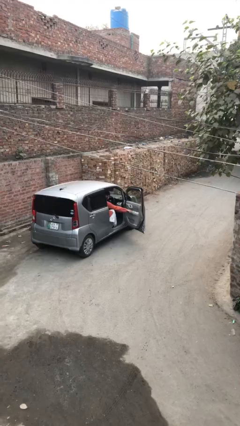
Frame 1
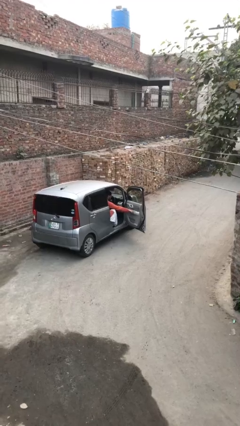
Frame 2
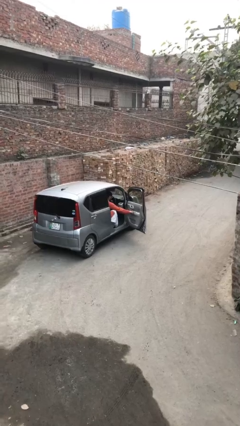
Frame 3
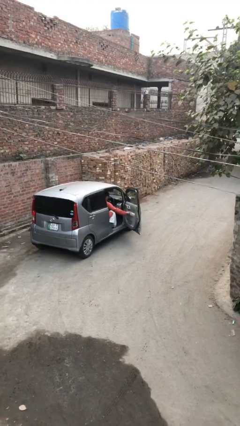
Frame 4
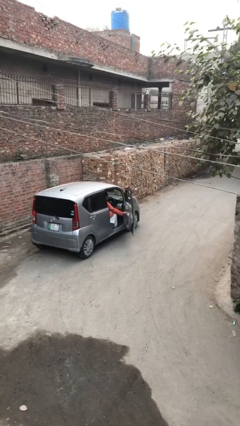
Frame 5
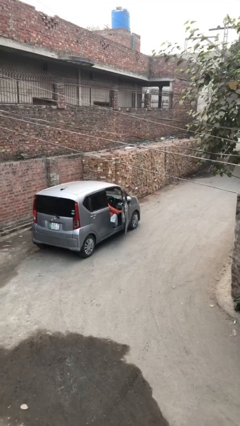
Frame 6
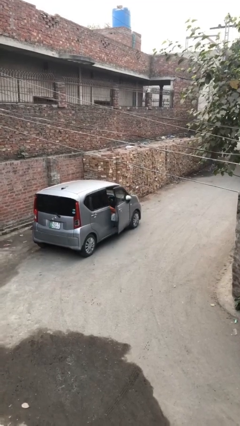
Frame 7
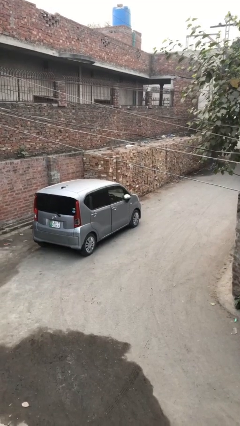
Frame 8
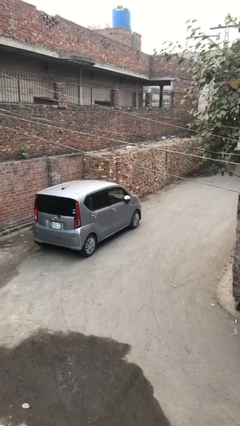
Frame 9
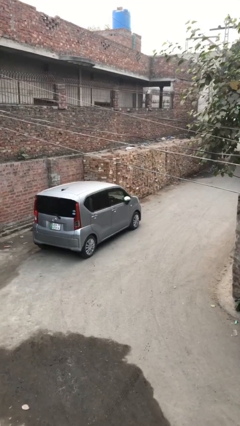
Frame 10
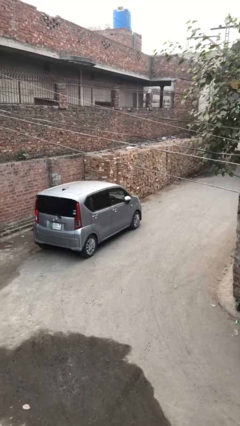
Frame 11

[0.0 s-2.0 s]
person closes car door

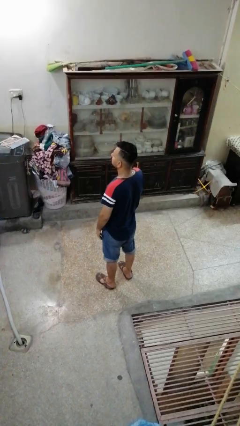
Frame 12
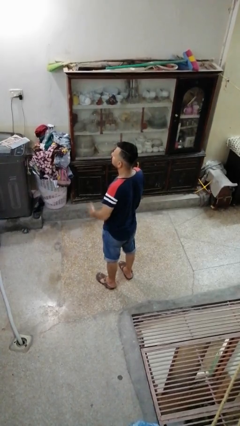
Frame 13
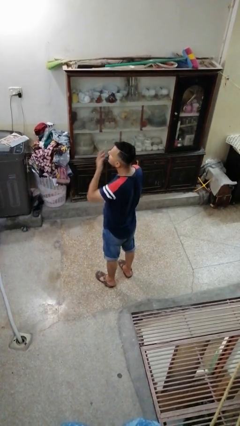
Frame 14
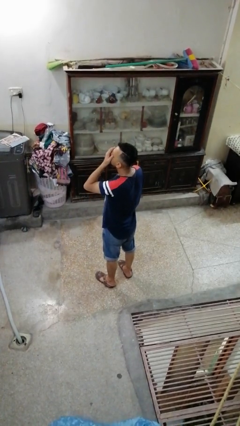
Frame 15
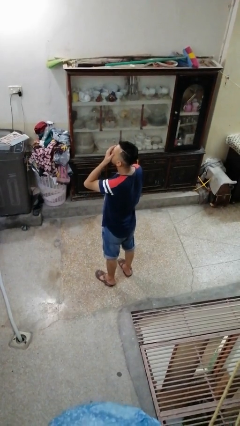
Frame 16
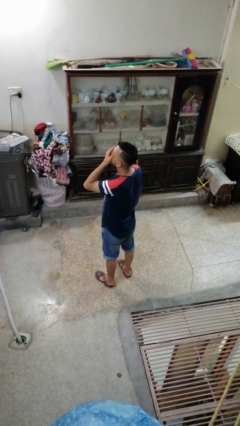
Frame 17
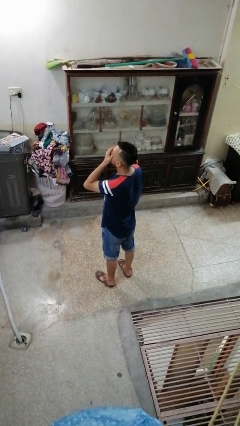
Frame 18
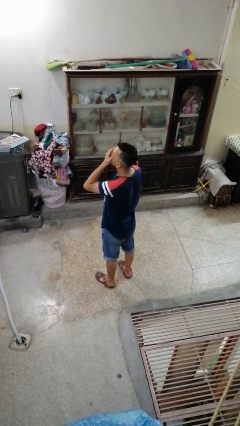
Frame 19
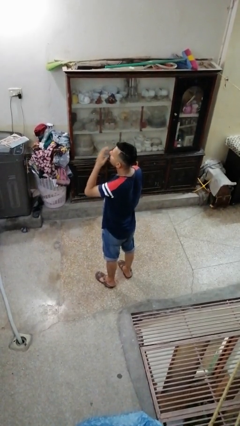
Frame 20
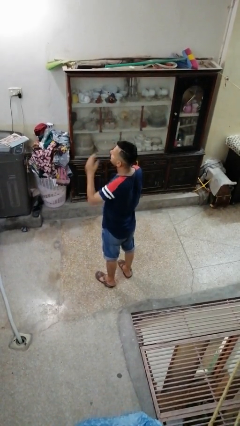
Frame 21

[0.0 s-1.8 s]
person covers face with hands

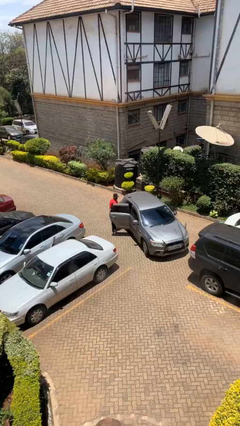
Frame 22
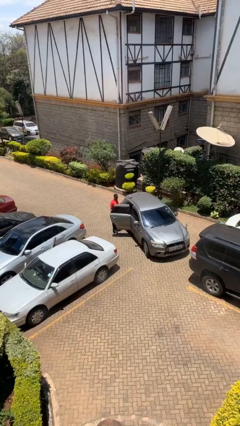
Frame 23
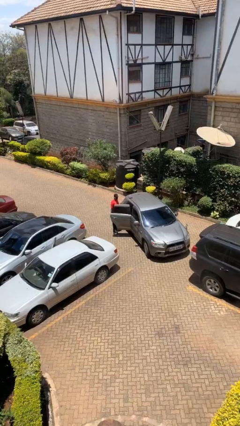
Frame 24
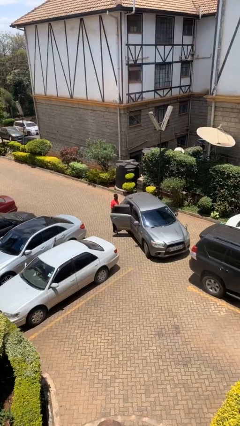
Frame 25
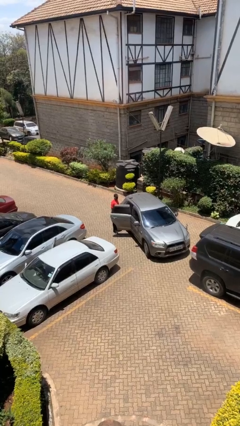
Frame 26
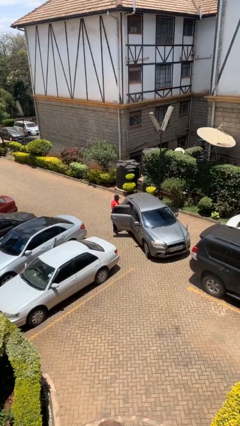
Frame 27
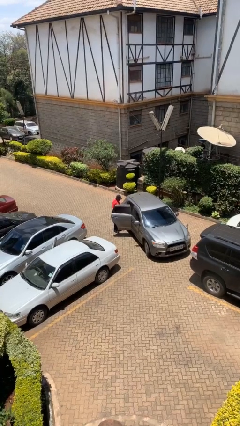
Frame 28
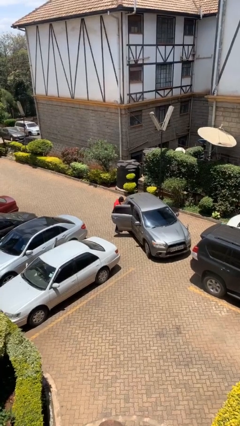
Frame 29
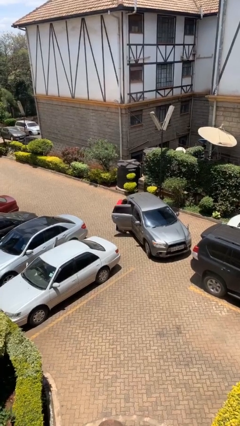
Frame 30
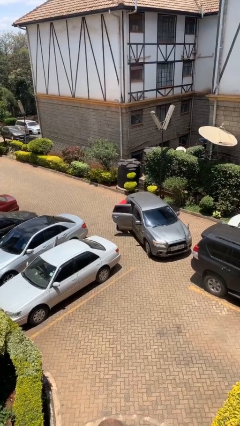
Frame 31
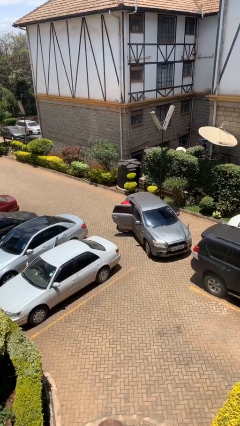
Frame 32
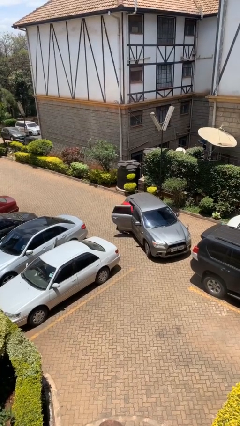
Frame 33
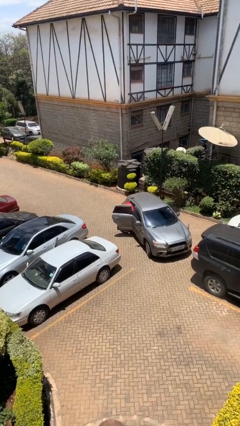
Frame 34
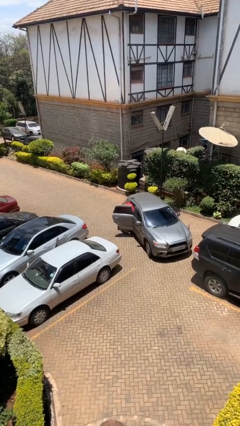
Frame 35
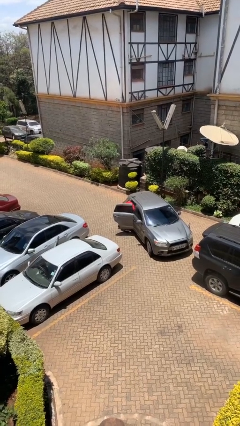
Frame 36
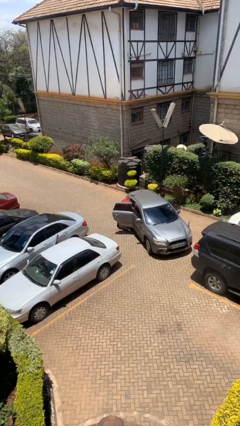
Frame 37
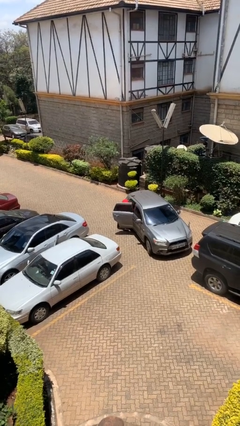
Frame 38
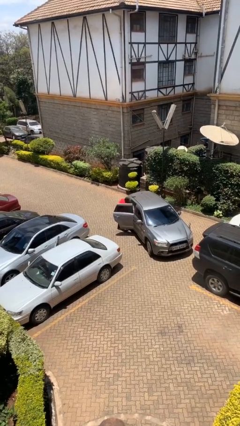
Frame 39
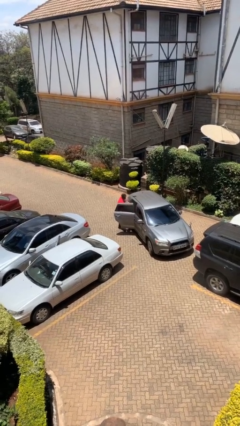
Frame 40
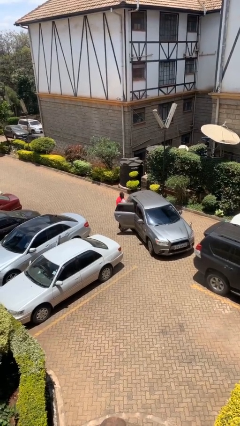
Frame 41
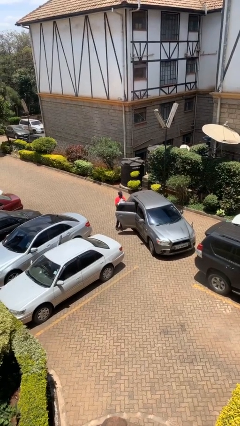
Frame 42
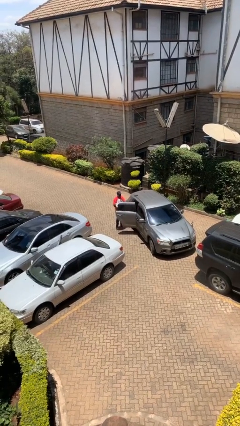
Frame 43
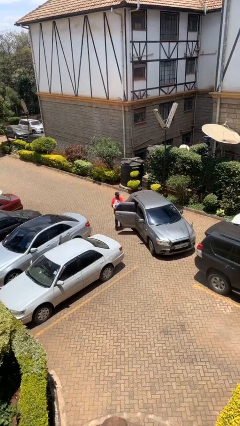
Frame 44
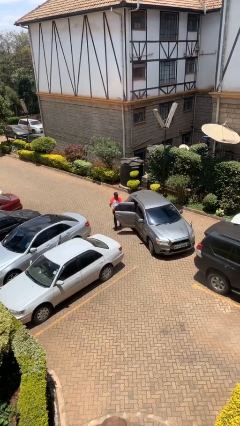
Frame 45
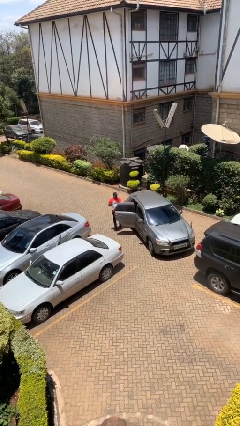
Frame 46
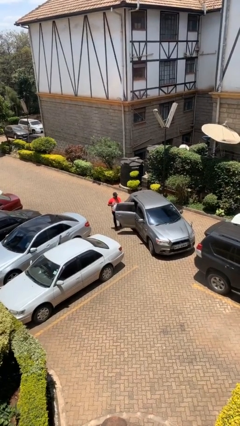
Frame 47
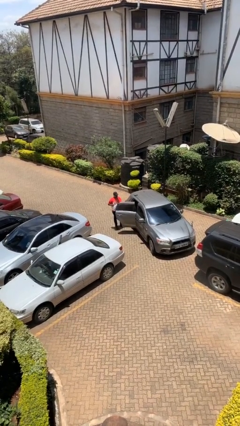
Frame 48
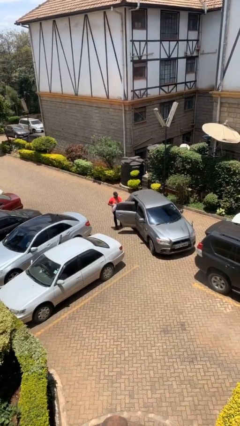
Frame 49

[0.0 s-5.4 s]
person unloads car

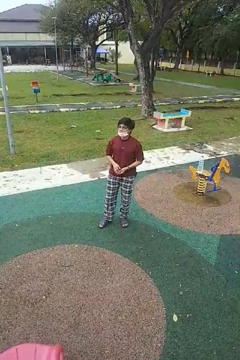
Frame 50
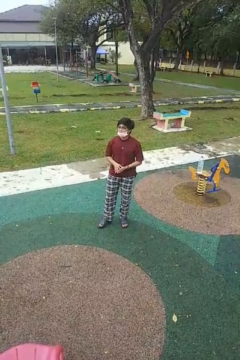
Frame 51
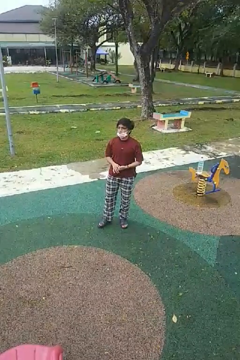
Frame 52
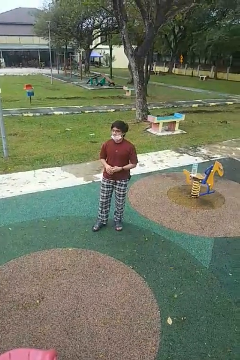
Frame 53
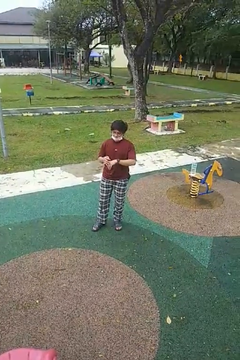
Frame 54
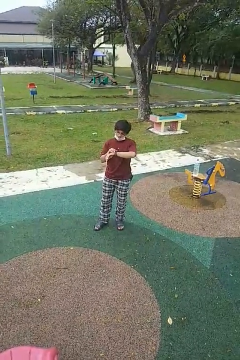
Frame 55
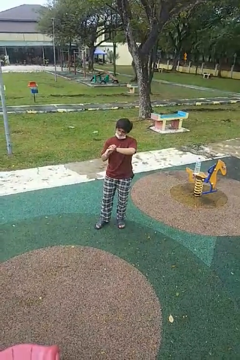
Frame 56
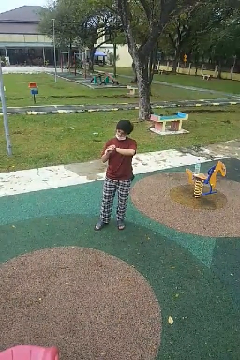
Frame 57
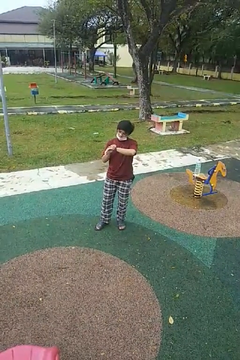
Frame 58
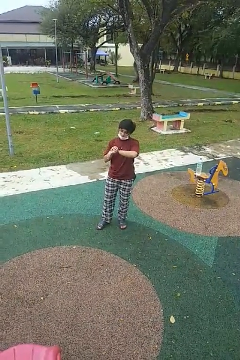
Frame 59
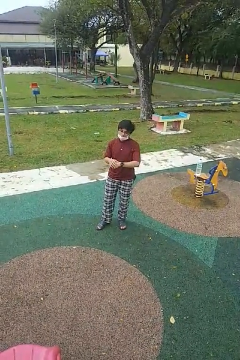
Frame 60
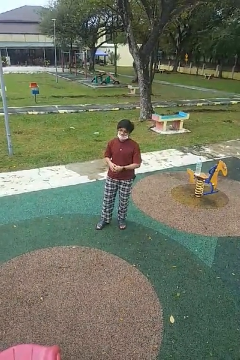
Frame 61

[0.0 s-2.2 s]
person looks at wristwatch

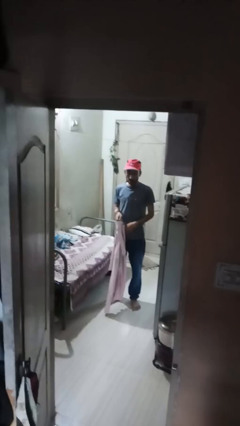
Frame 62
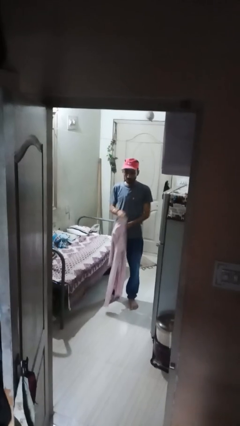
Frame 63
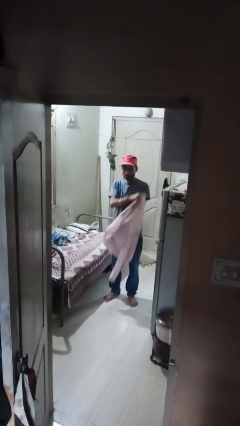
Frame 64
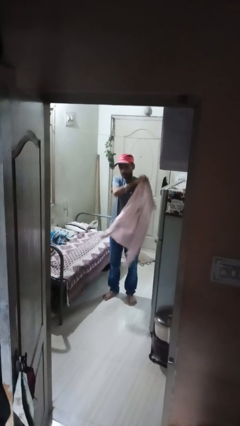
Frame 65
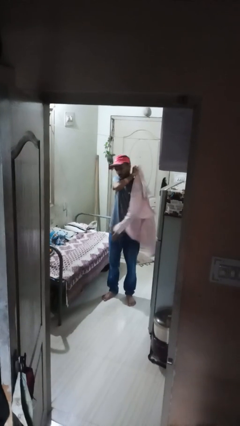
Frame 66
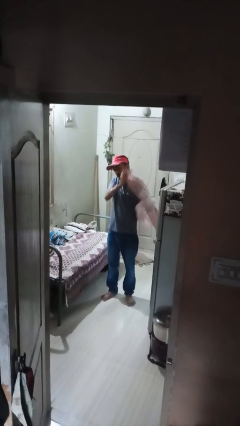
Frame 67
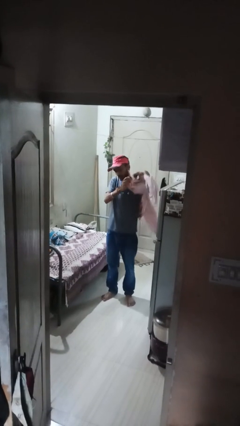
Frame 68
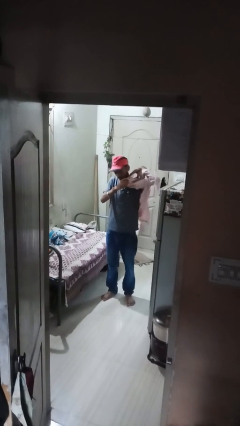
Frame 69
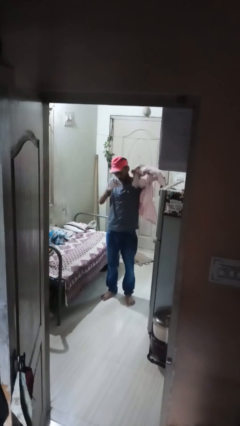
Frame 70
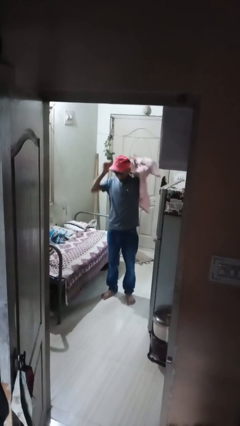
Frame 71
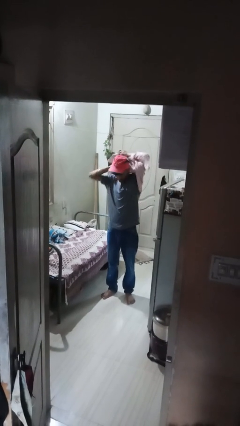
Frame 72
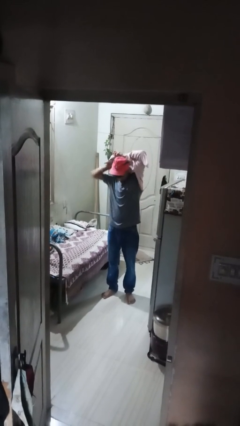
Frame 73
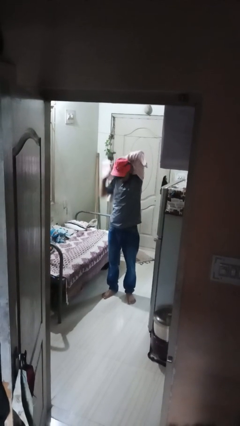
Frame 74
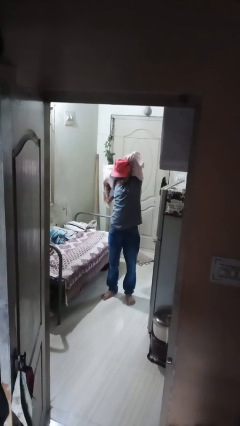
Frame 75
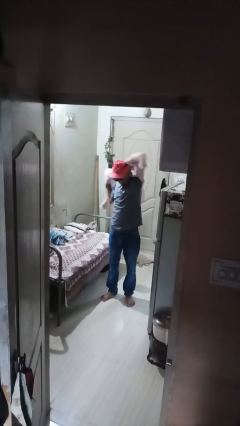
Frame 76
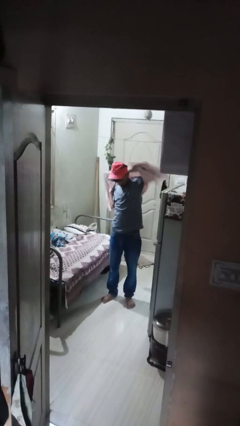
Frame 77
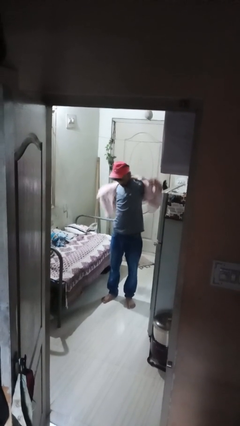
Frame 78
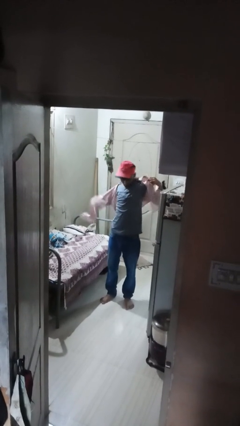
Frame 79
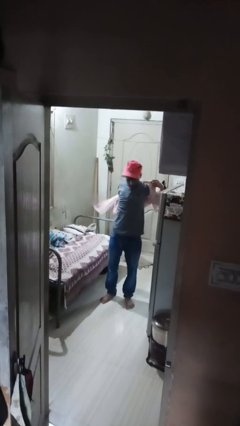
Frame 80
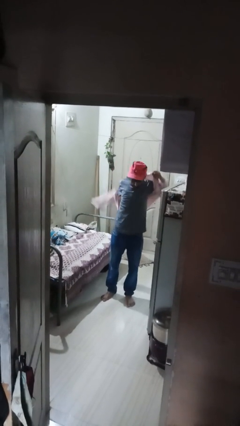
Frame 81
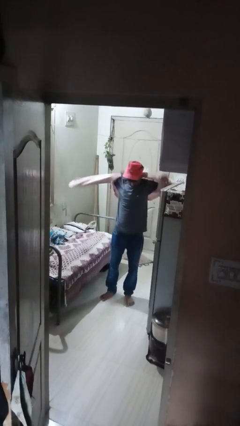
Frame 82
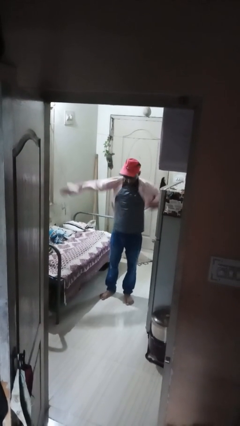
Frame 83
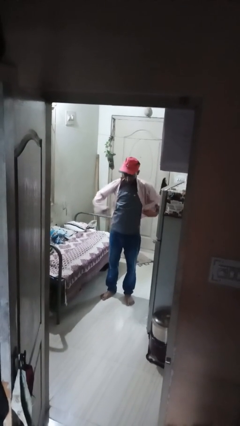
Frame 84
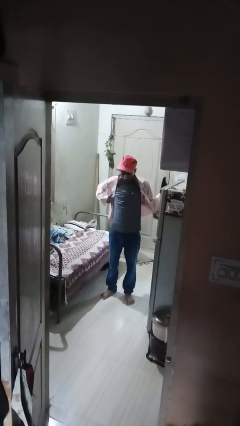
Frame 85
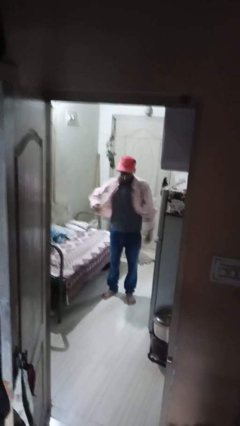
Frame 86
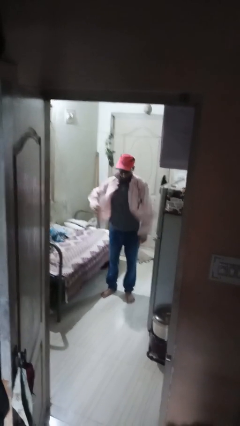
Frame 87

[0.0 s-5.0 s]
person puts on shirt

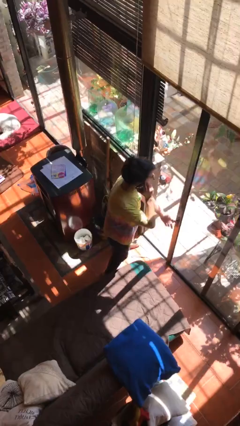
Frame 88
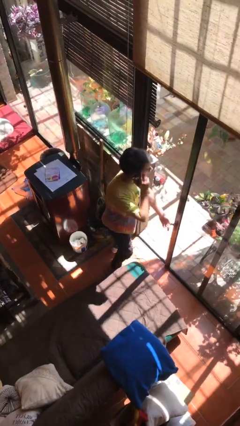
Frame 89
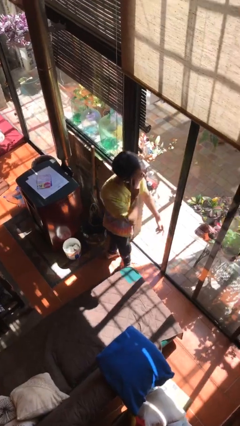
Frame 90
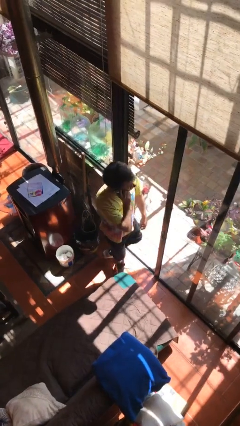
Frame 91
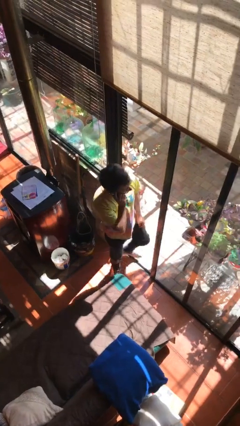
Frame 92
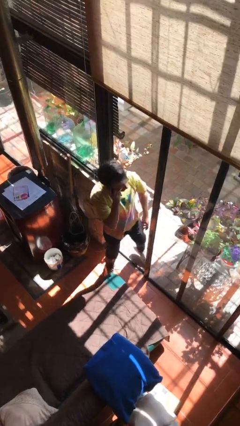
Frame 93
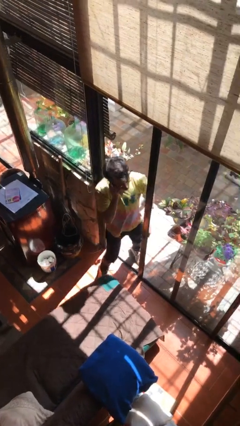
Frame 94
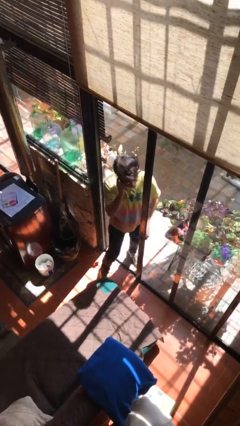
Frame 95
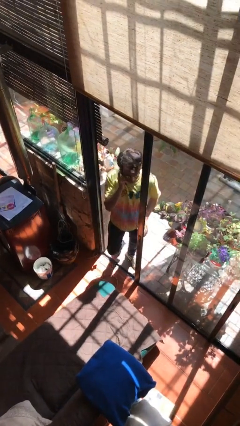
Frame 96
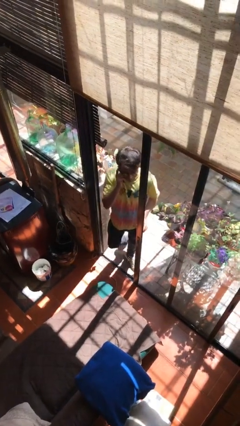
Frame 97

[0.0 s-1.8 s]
person exits scene through structure
